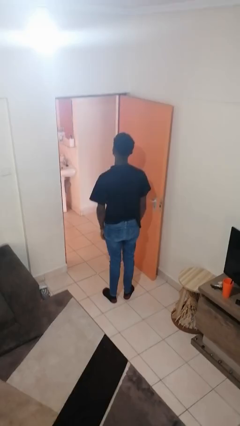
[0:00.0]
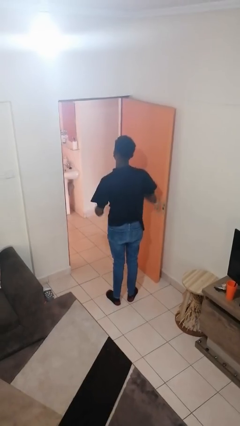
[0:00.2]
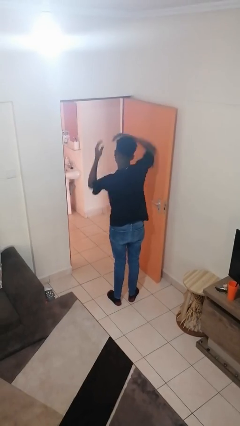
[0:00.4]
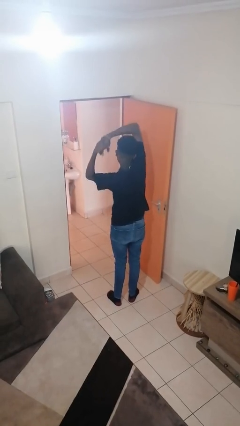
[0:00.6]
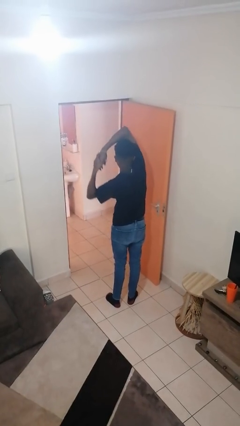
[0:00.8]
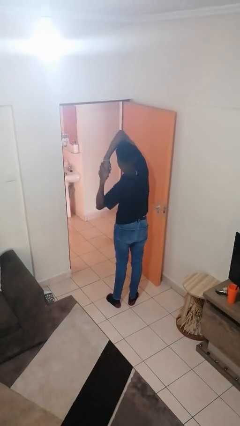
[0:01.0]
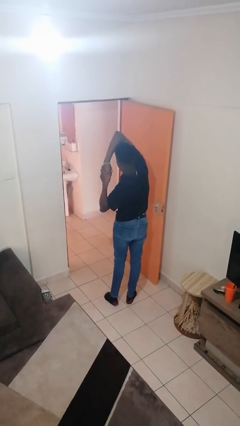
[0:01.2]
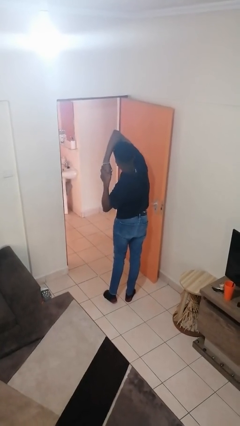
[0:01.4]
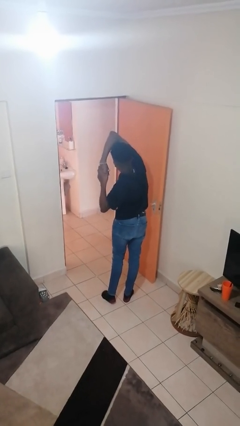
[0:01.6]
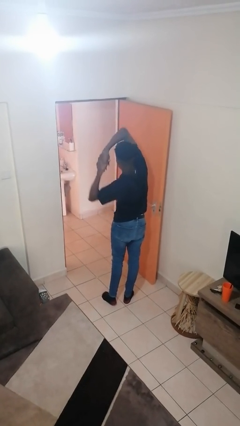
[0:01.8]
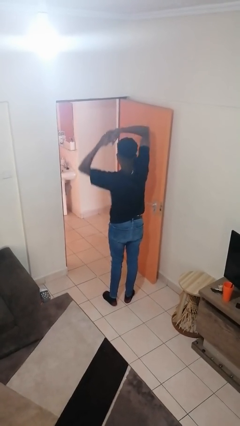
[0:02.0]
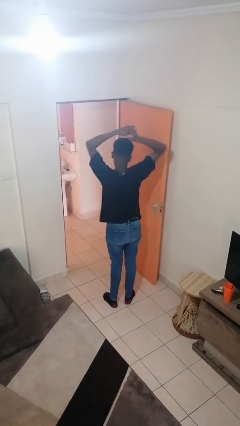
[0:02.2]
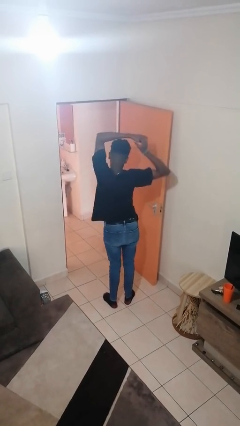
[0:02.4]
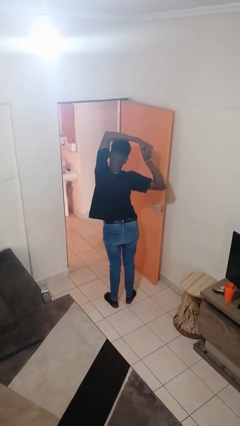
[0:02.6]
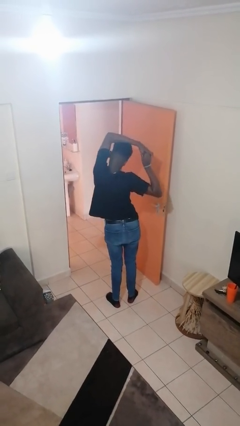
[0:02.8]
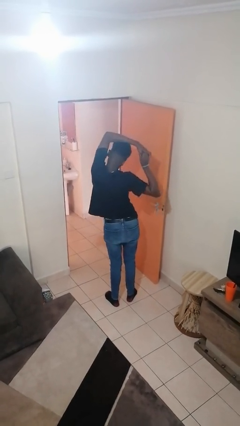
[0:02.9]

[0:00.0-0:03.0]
person stretches arms over head

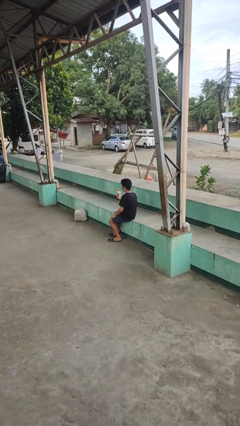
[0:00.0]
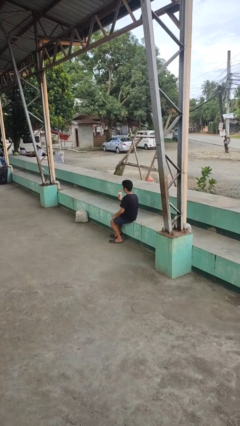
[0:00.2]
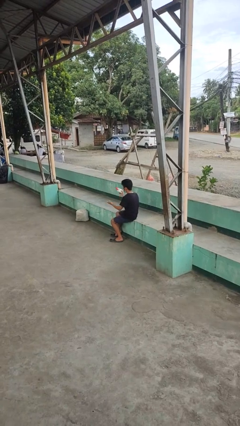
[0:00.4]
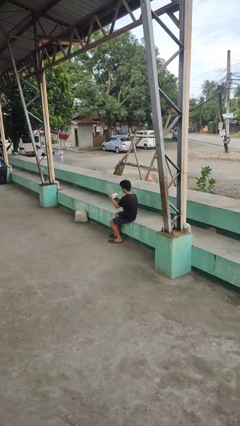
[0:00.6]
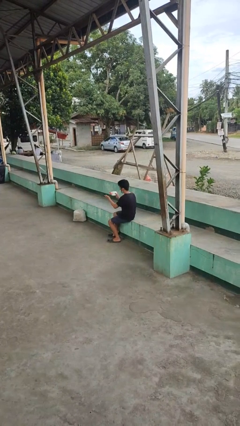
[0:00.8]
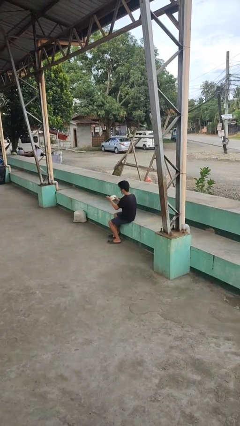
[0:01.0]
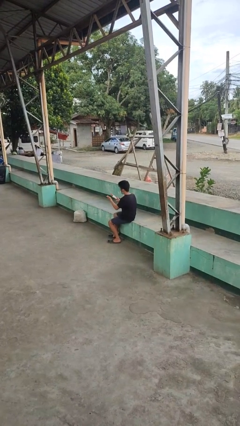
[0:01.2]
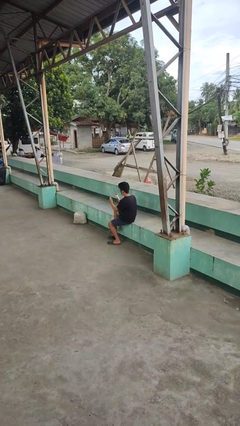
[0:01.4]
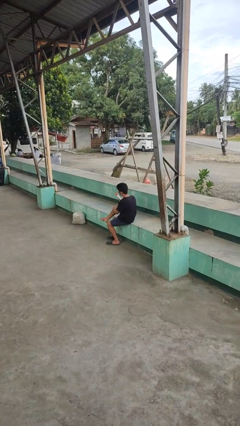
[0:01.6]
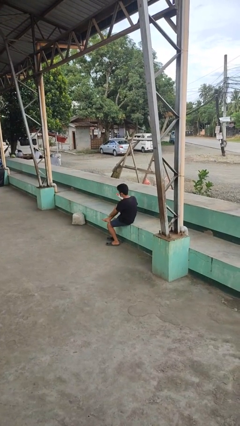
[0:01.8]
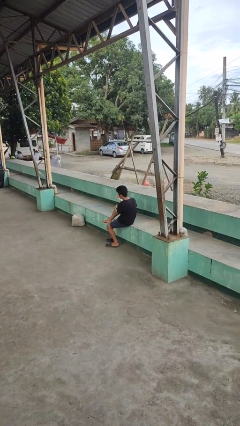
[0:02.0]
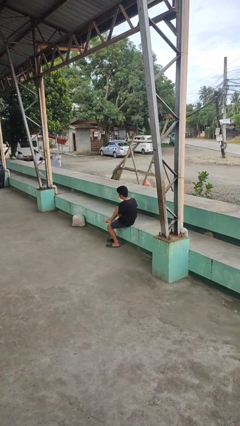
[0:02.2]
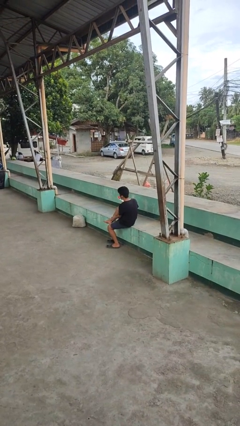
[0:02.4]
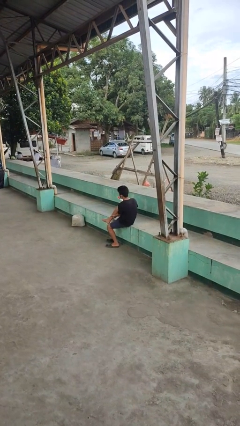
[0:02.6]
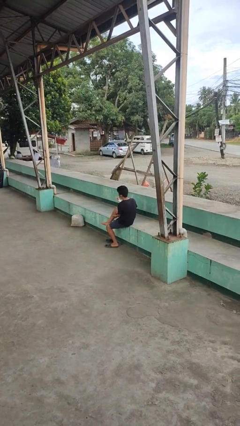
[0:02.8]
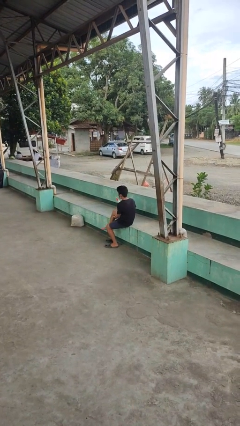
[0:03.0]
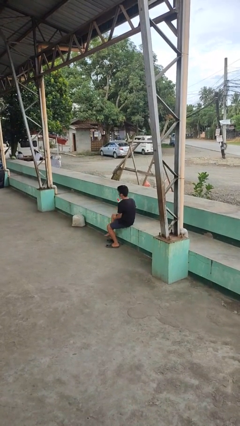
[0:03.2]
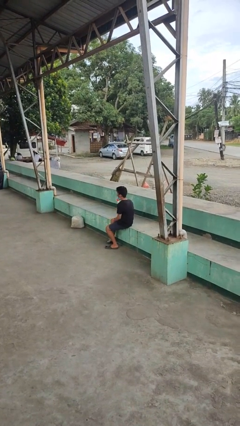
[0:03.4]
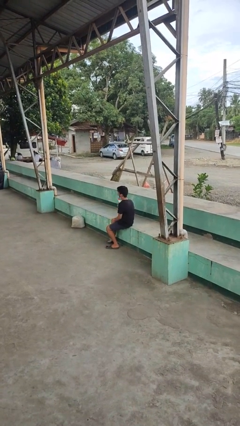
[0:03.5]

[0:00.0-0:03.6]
person applies sunscreen

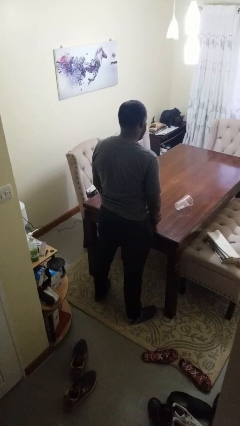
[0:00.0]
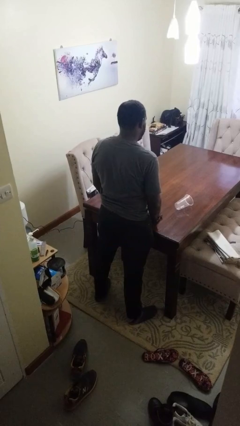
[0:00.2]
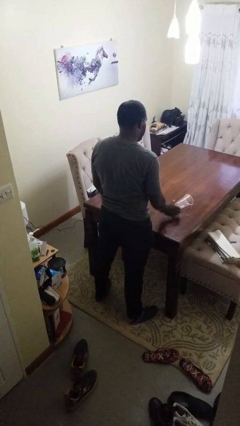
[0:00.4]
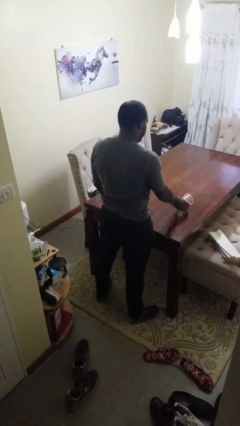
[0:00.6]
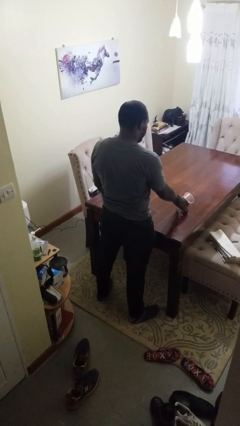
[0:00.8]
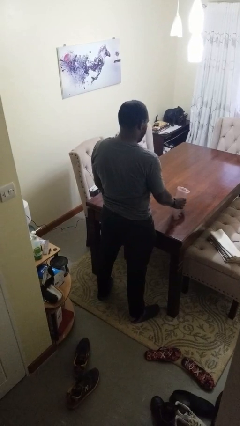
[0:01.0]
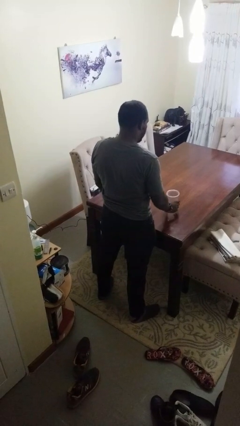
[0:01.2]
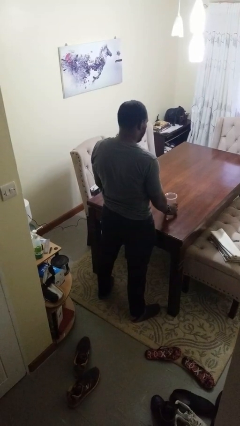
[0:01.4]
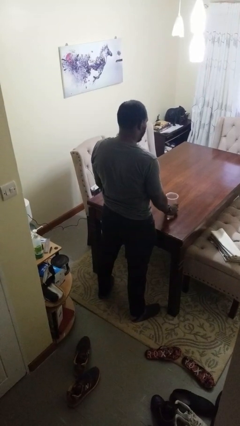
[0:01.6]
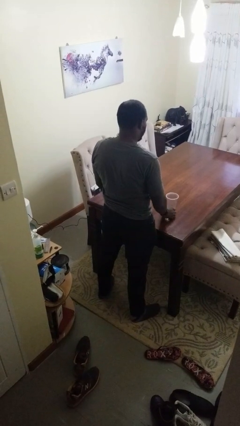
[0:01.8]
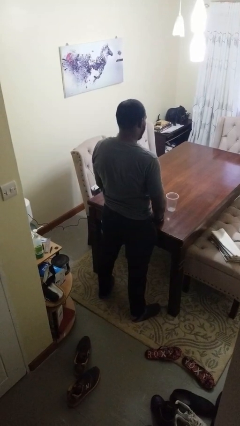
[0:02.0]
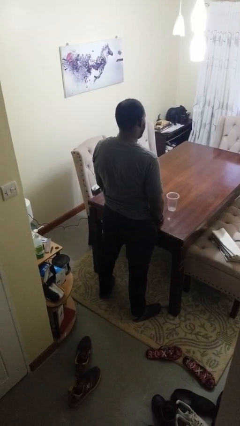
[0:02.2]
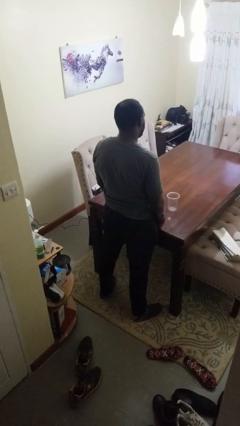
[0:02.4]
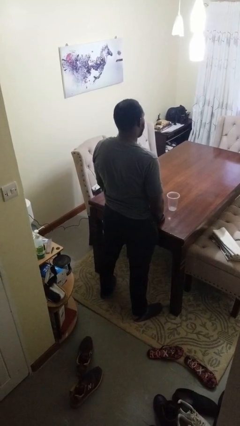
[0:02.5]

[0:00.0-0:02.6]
person sets upright glass

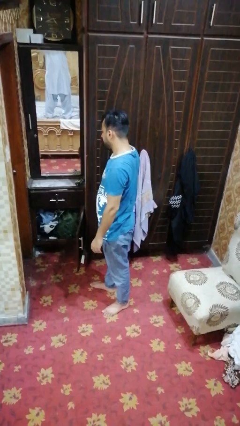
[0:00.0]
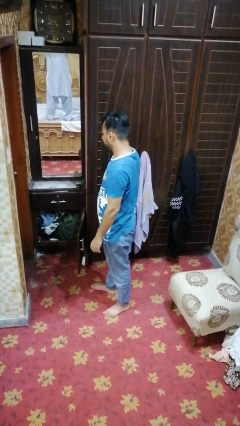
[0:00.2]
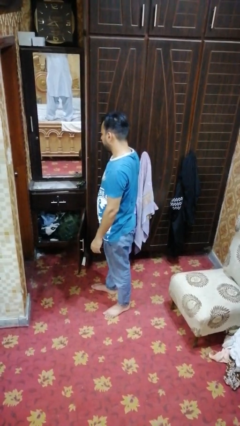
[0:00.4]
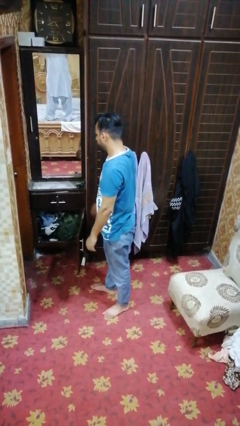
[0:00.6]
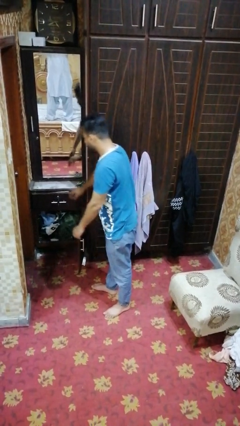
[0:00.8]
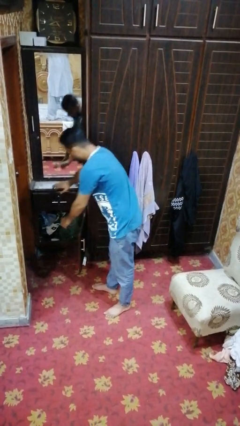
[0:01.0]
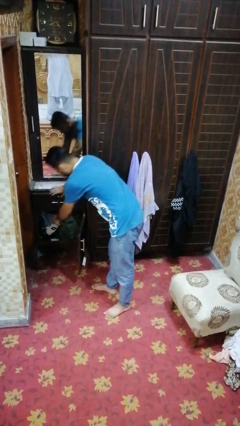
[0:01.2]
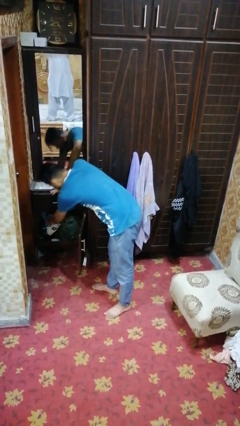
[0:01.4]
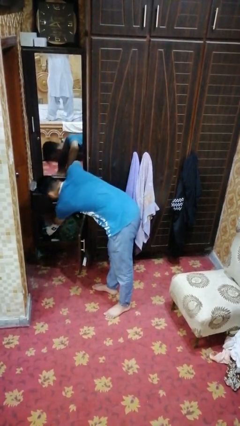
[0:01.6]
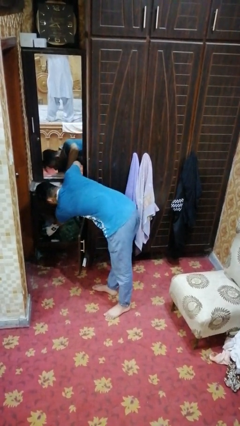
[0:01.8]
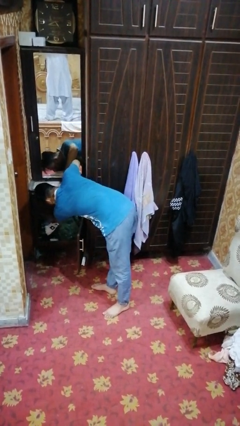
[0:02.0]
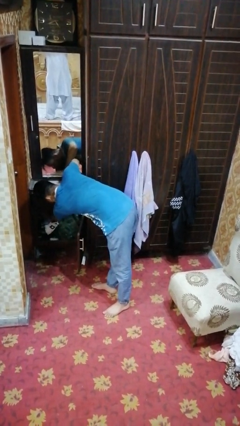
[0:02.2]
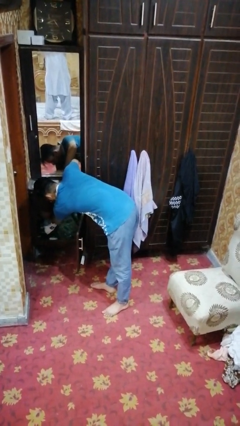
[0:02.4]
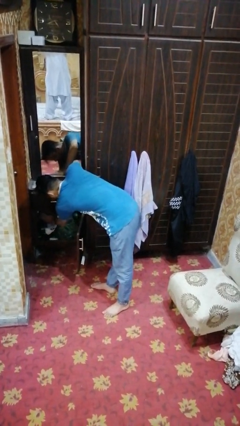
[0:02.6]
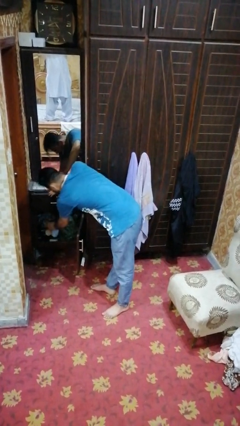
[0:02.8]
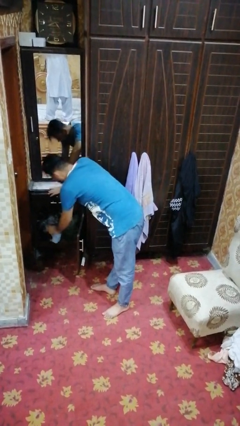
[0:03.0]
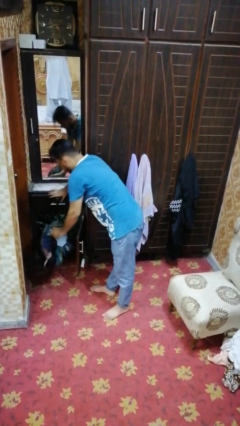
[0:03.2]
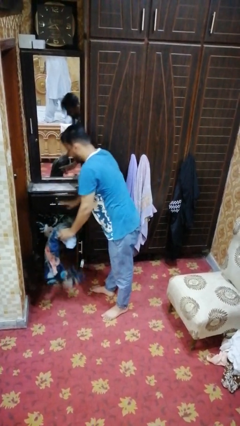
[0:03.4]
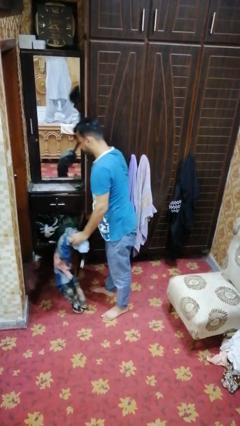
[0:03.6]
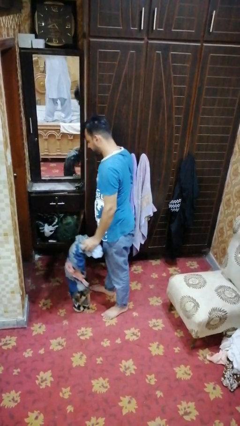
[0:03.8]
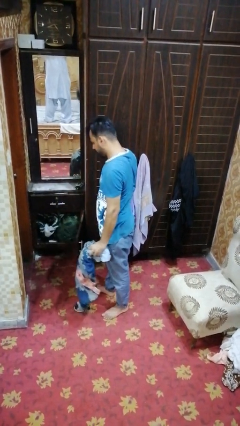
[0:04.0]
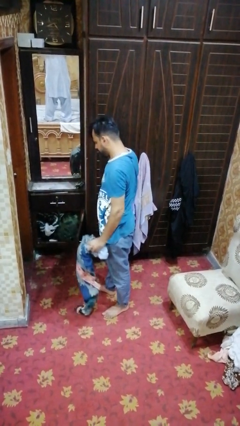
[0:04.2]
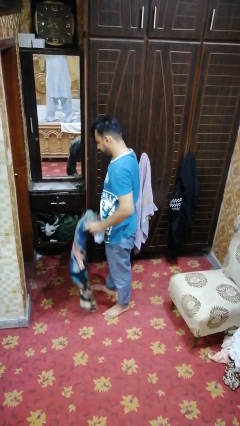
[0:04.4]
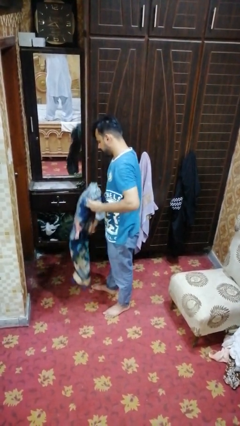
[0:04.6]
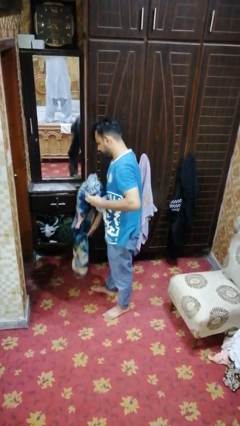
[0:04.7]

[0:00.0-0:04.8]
person takes clothes from dresser

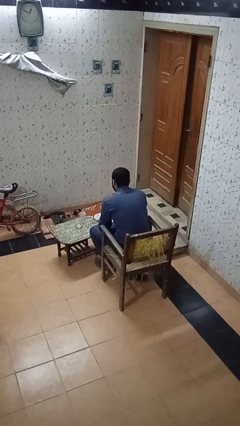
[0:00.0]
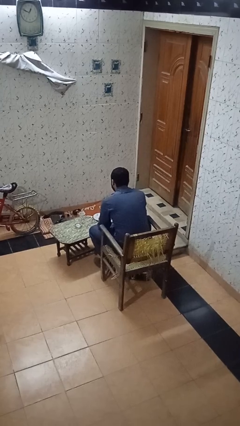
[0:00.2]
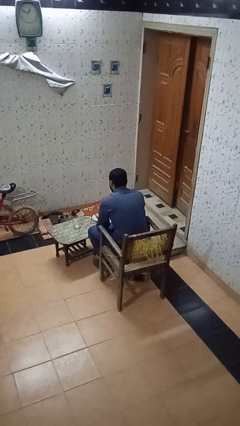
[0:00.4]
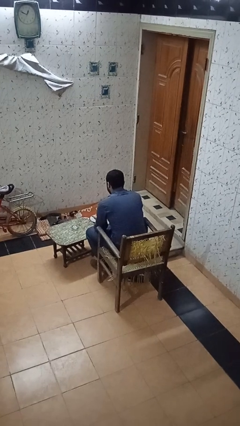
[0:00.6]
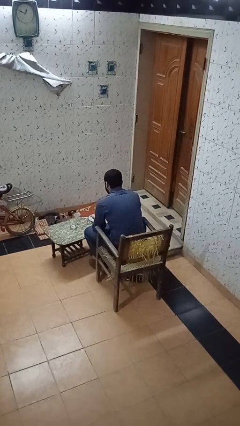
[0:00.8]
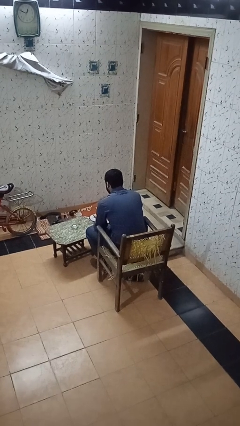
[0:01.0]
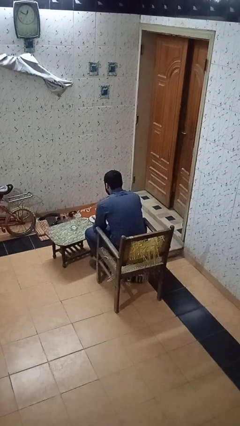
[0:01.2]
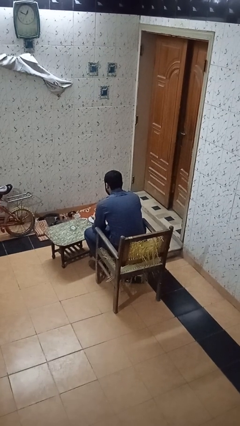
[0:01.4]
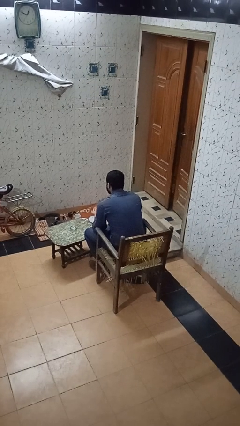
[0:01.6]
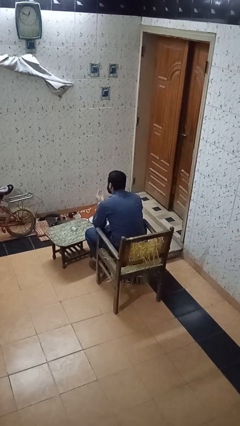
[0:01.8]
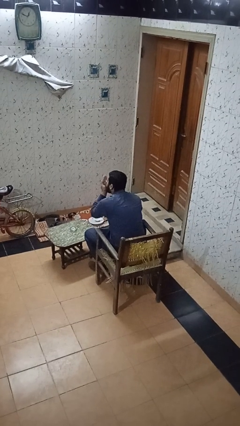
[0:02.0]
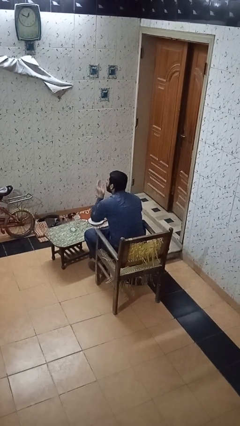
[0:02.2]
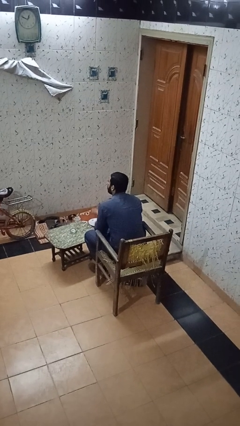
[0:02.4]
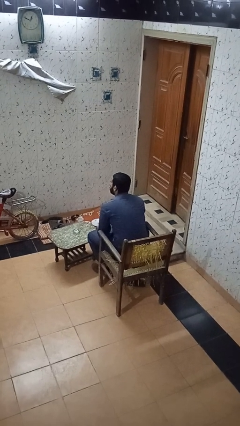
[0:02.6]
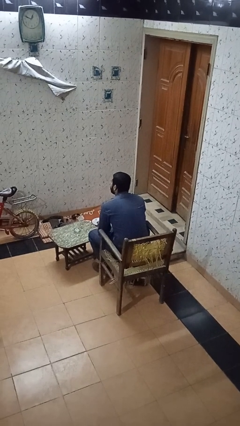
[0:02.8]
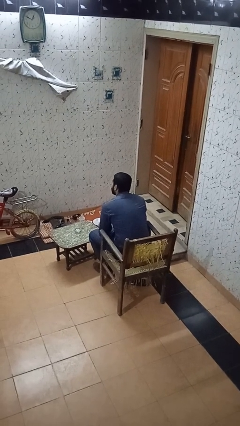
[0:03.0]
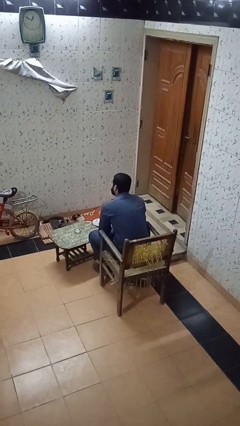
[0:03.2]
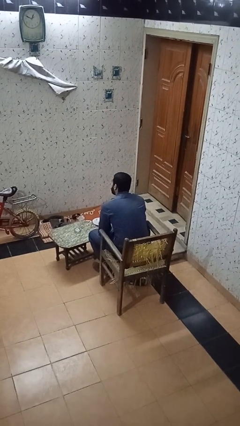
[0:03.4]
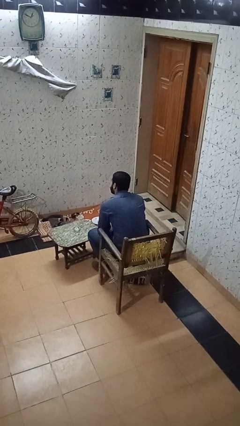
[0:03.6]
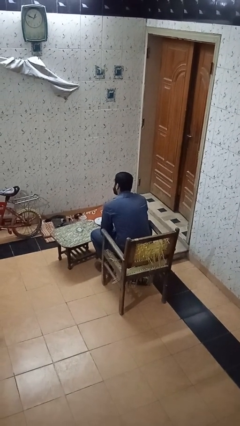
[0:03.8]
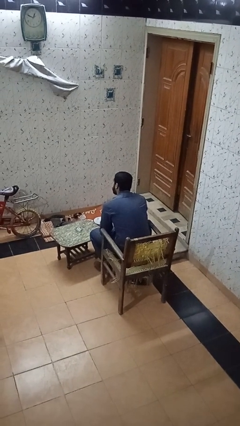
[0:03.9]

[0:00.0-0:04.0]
person takes medicine pills
